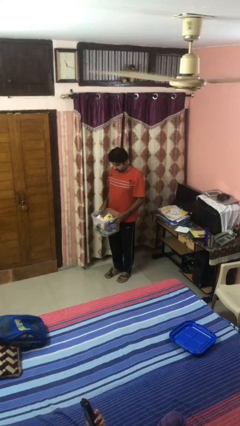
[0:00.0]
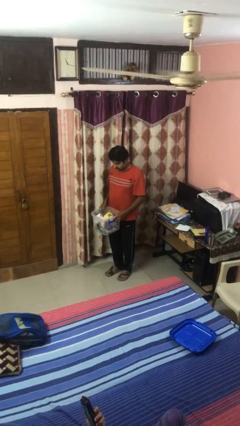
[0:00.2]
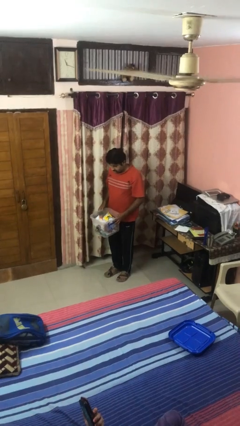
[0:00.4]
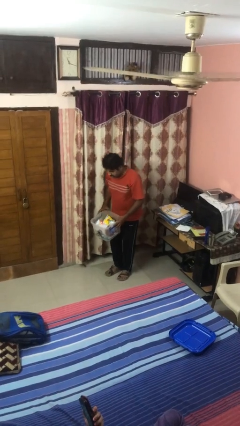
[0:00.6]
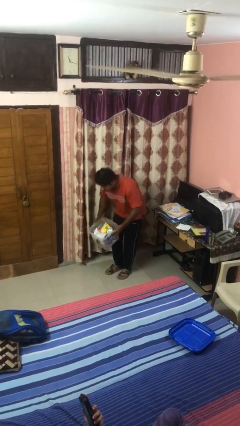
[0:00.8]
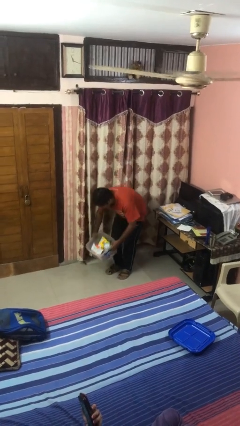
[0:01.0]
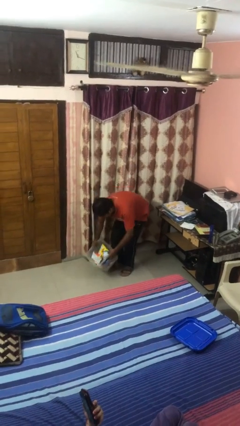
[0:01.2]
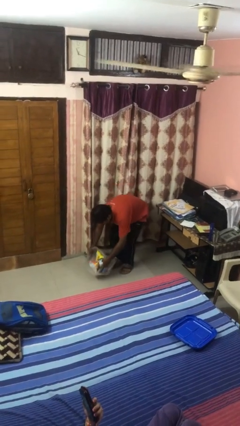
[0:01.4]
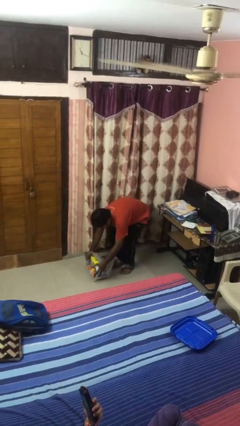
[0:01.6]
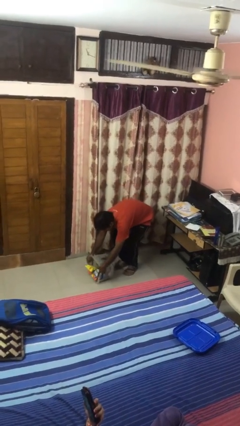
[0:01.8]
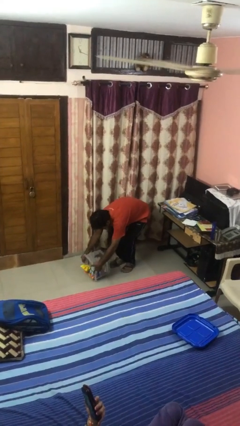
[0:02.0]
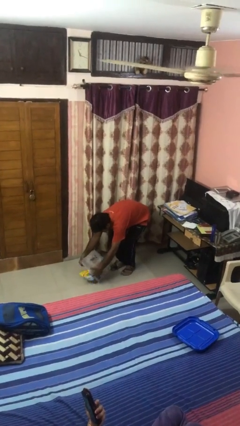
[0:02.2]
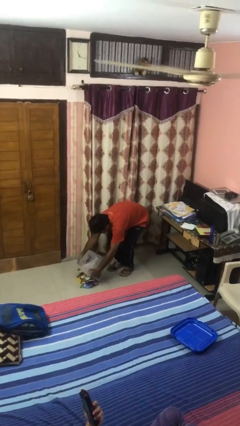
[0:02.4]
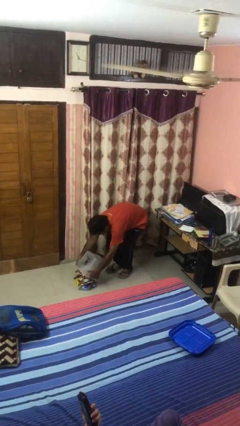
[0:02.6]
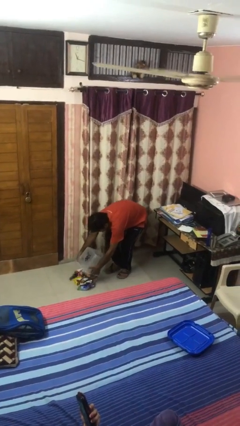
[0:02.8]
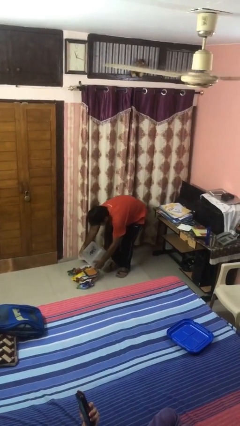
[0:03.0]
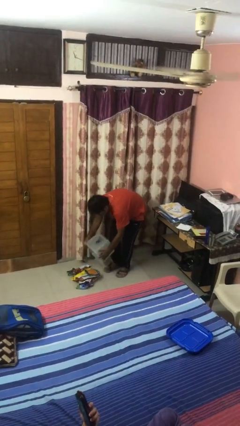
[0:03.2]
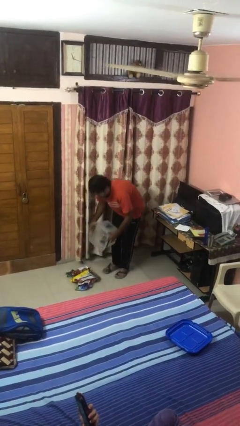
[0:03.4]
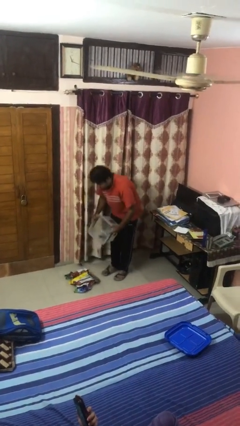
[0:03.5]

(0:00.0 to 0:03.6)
person unloads box onto floor

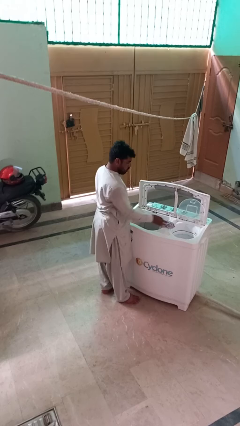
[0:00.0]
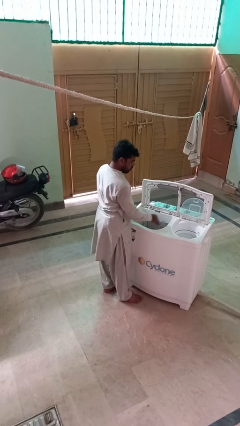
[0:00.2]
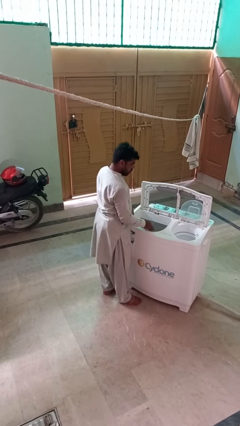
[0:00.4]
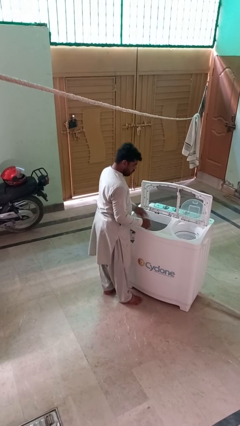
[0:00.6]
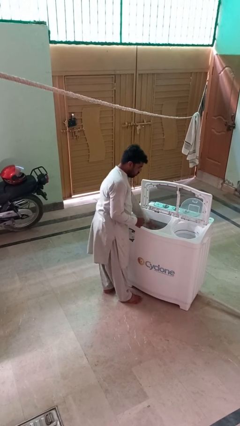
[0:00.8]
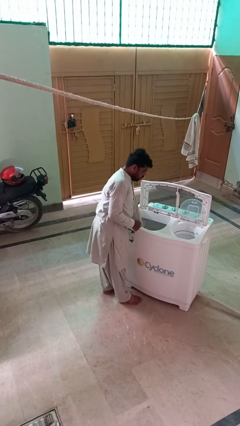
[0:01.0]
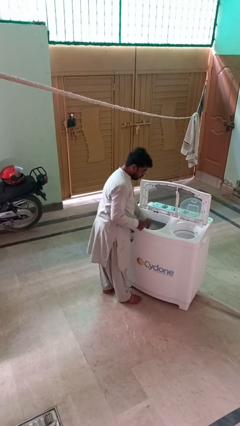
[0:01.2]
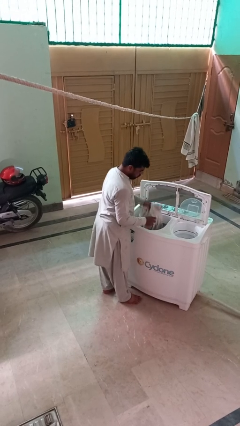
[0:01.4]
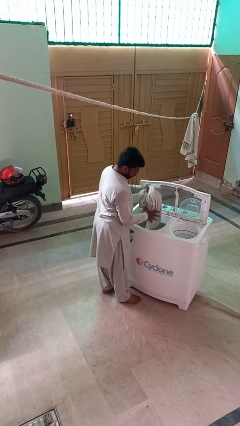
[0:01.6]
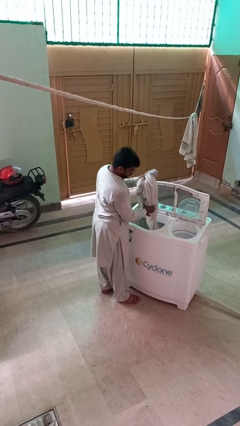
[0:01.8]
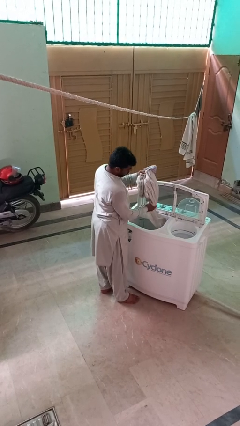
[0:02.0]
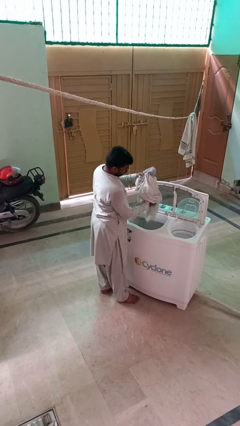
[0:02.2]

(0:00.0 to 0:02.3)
person unloads clotheswasher

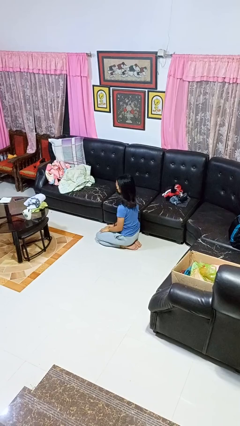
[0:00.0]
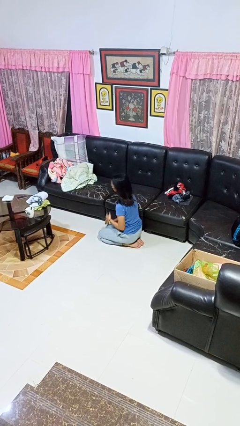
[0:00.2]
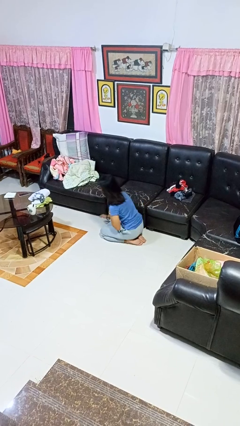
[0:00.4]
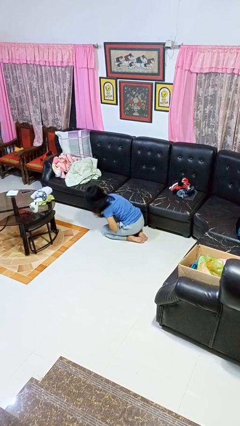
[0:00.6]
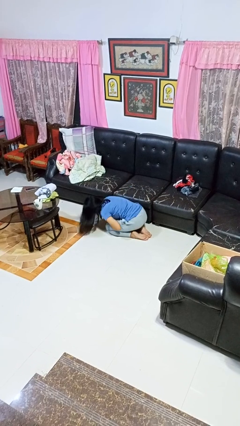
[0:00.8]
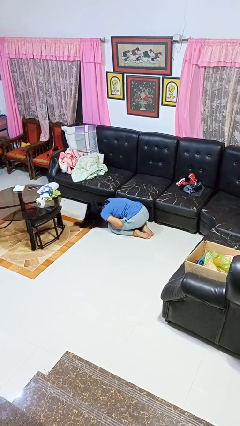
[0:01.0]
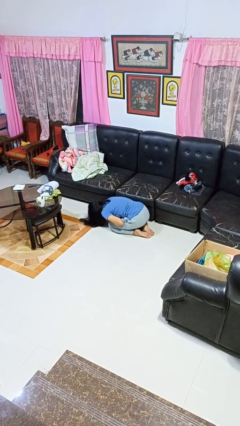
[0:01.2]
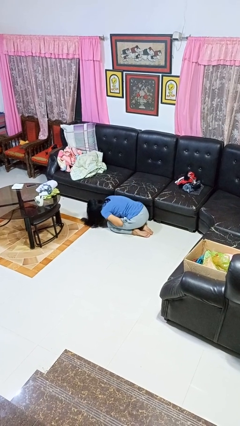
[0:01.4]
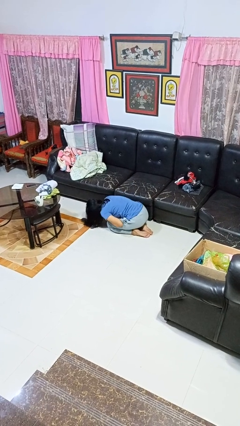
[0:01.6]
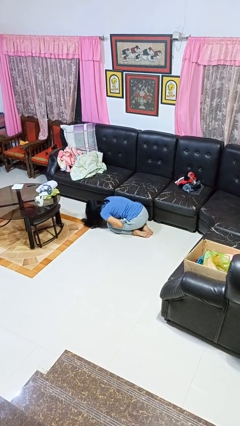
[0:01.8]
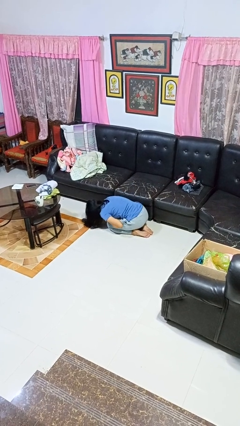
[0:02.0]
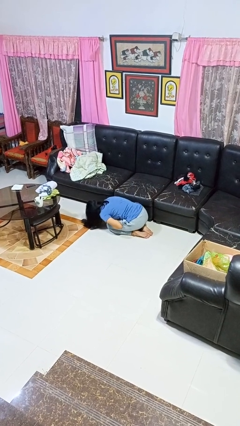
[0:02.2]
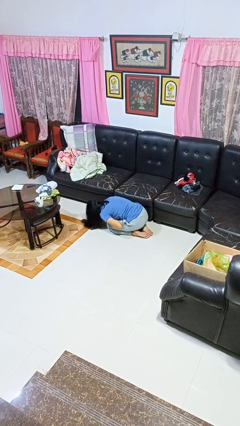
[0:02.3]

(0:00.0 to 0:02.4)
person searches under couch

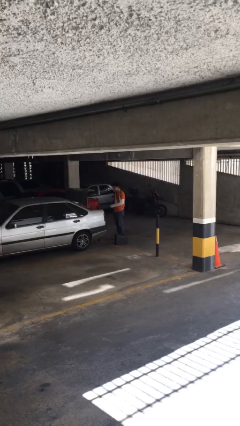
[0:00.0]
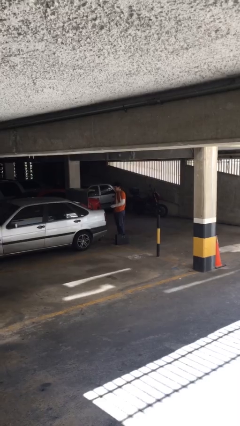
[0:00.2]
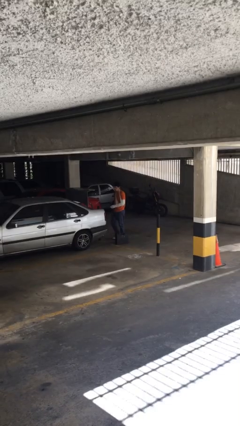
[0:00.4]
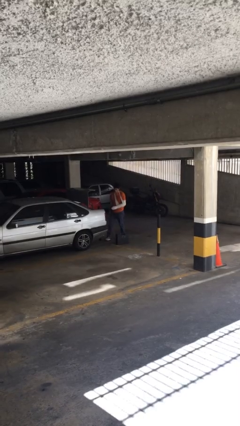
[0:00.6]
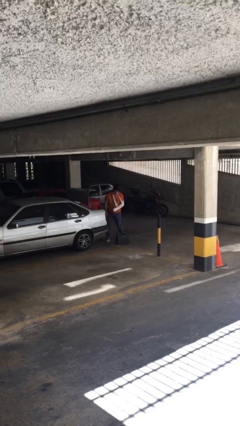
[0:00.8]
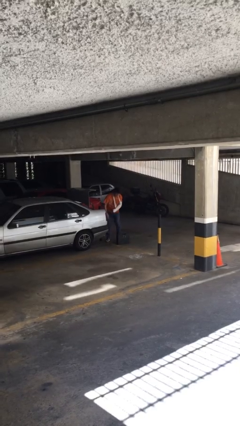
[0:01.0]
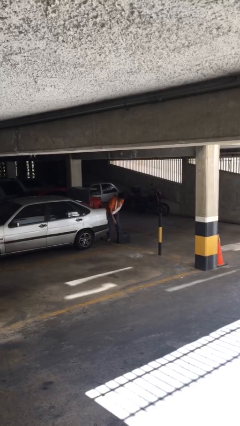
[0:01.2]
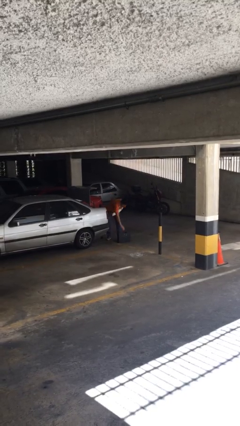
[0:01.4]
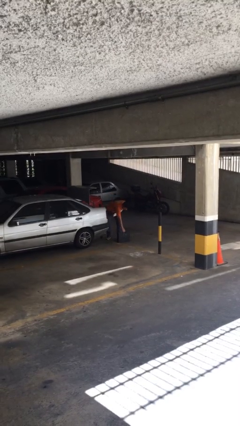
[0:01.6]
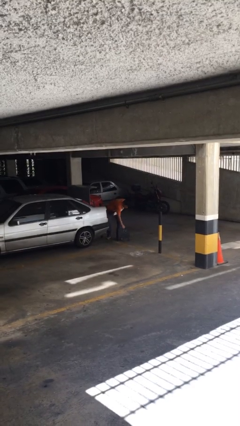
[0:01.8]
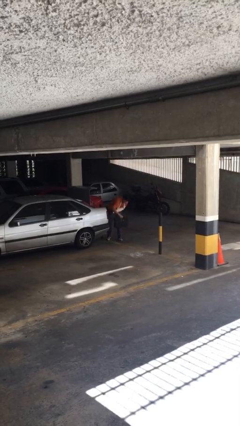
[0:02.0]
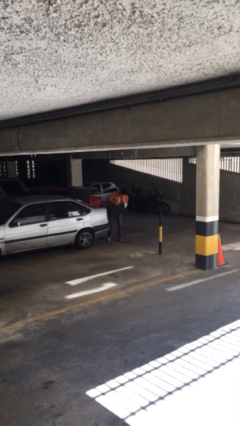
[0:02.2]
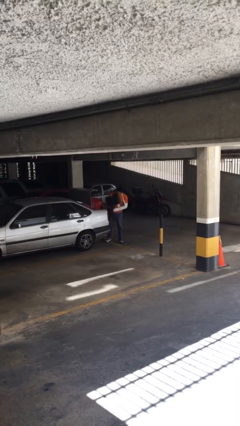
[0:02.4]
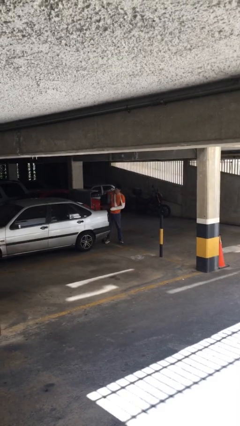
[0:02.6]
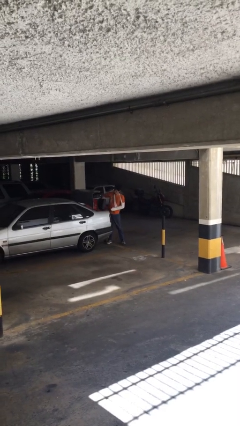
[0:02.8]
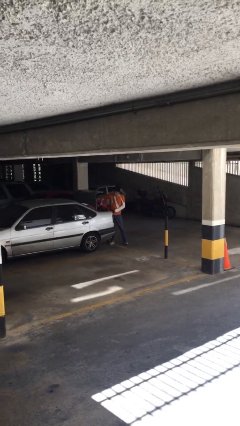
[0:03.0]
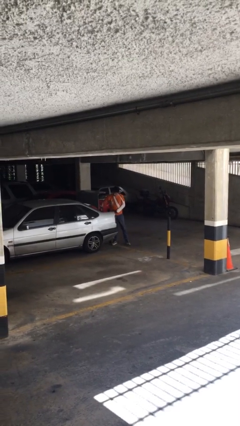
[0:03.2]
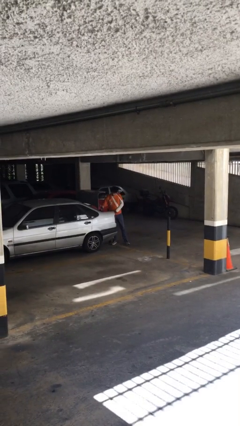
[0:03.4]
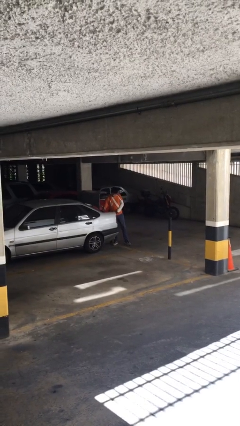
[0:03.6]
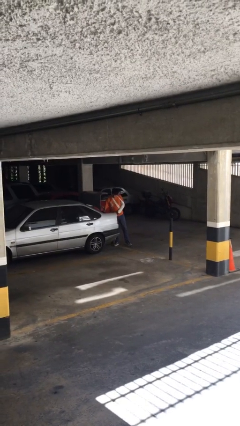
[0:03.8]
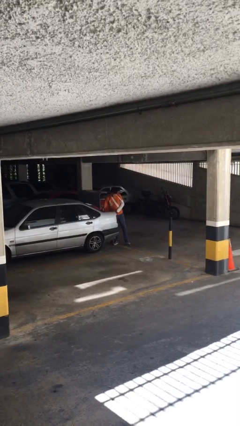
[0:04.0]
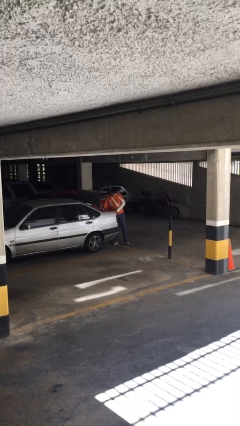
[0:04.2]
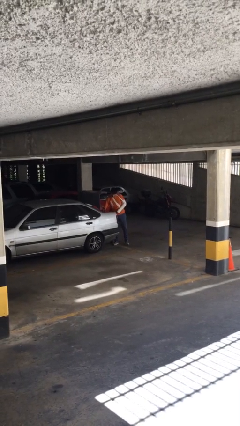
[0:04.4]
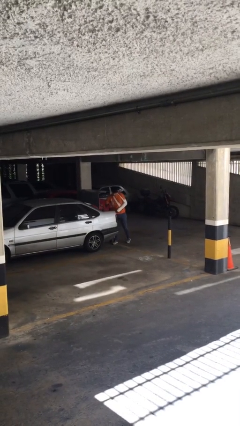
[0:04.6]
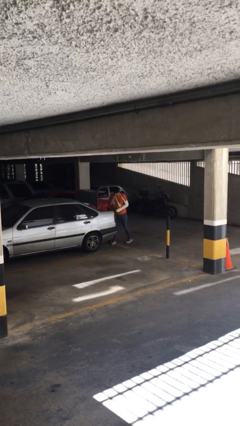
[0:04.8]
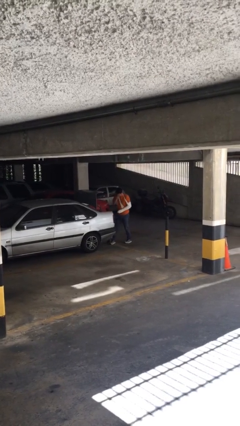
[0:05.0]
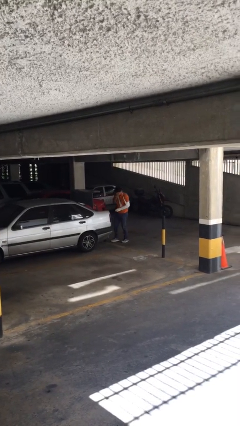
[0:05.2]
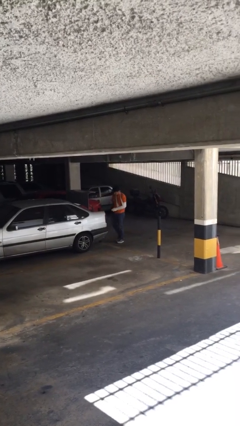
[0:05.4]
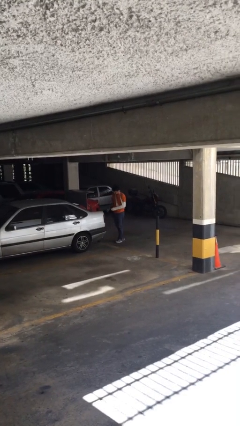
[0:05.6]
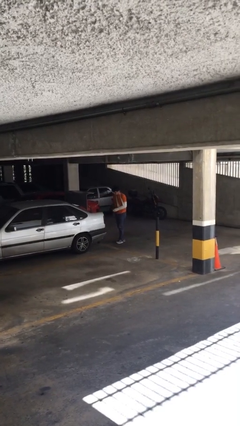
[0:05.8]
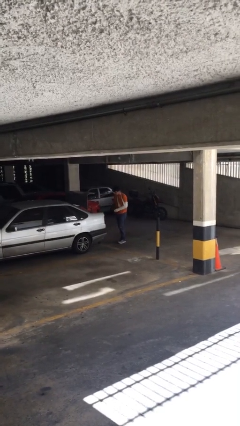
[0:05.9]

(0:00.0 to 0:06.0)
person loads car

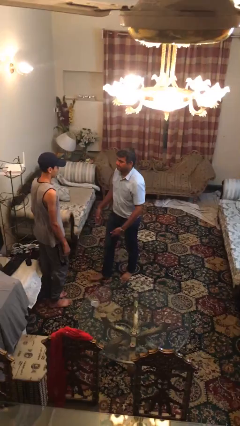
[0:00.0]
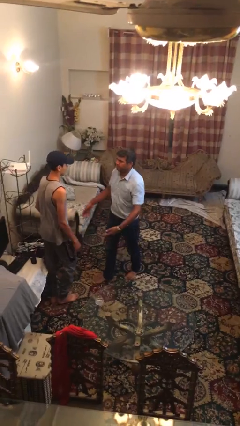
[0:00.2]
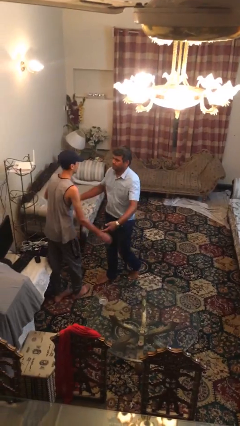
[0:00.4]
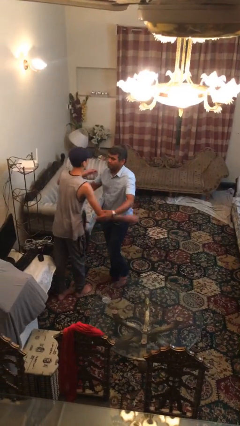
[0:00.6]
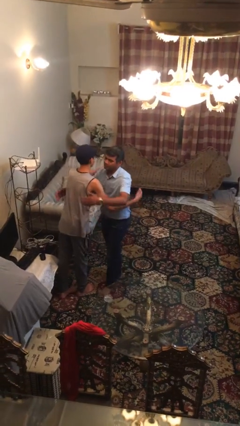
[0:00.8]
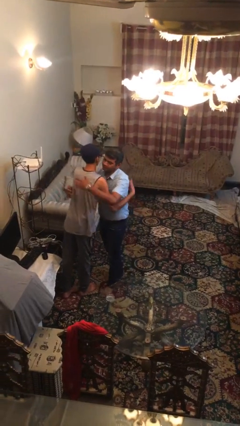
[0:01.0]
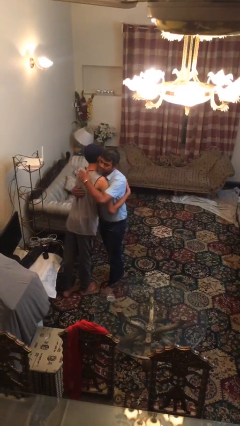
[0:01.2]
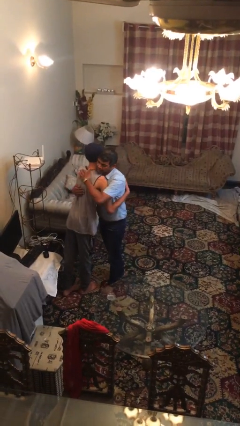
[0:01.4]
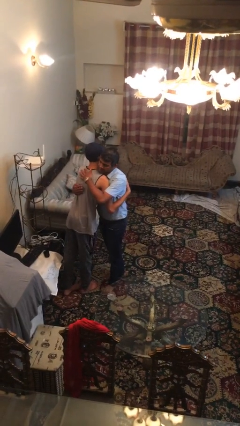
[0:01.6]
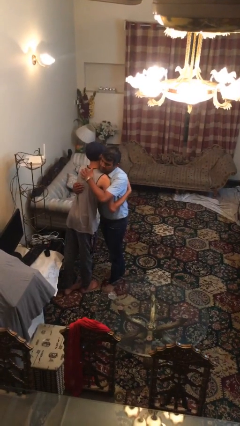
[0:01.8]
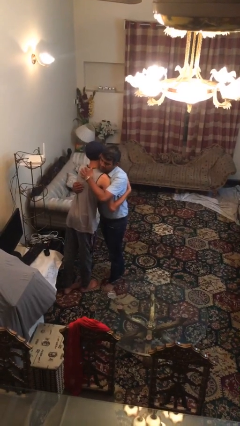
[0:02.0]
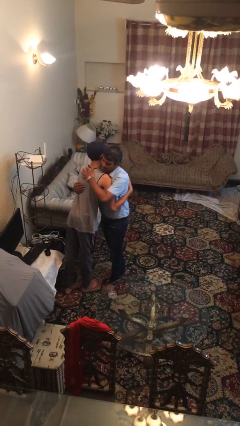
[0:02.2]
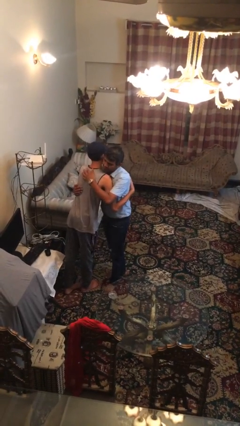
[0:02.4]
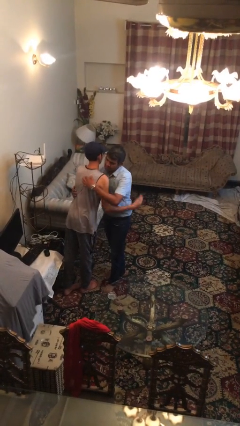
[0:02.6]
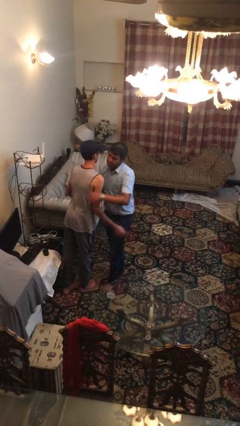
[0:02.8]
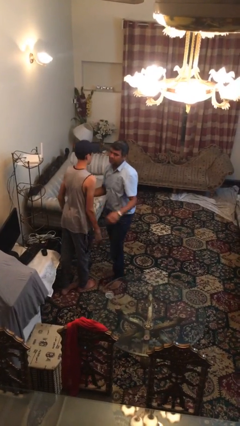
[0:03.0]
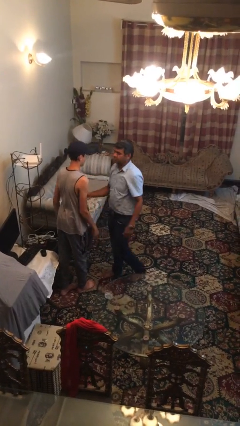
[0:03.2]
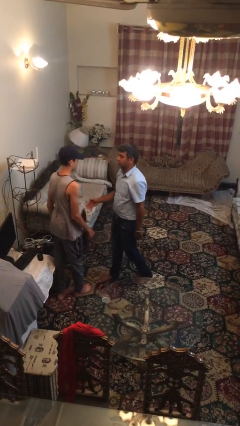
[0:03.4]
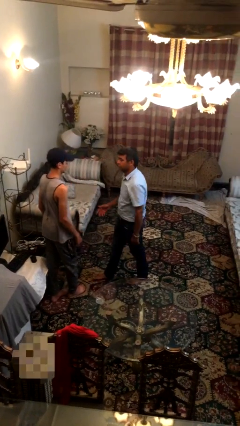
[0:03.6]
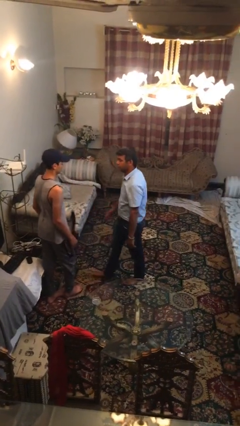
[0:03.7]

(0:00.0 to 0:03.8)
person embraces person
